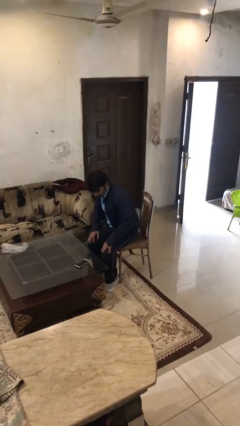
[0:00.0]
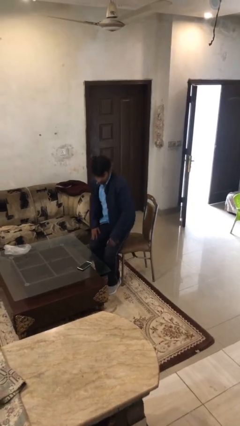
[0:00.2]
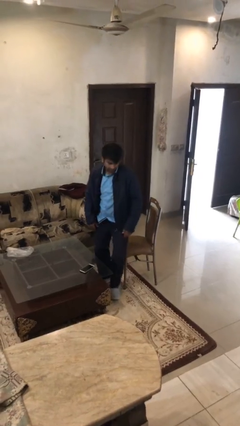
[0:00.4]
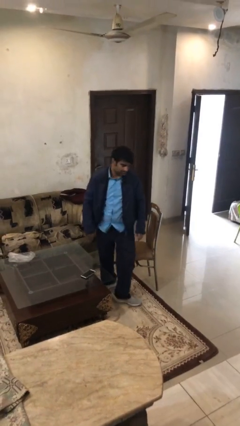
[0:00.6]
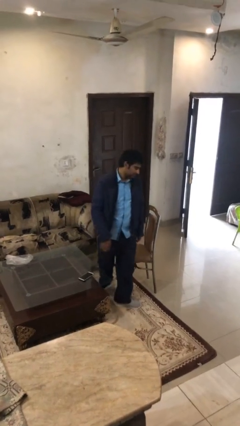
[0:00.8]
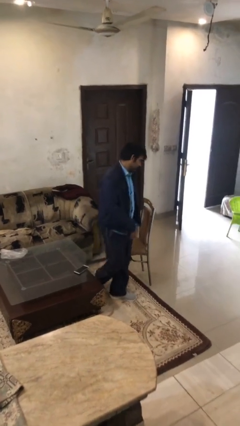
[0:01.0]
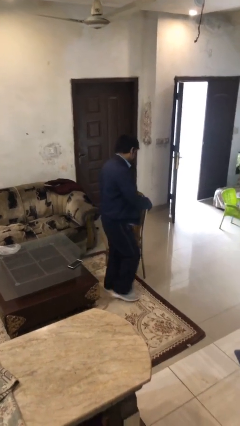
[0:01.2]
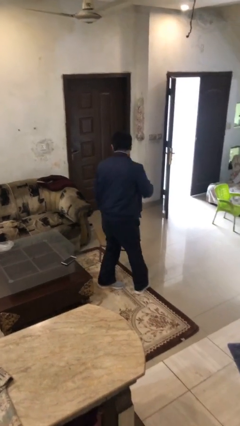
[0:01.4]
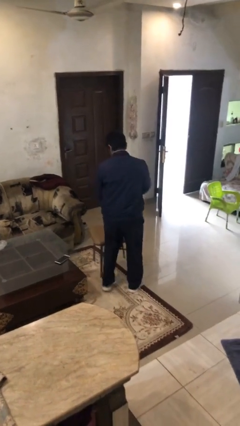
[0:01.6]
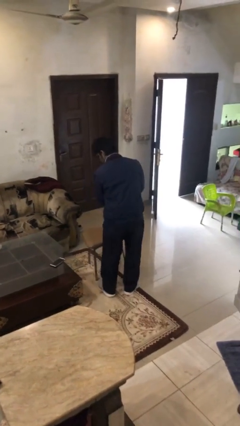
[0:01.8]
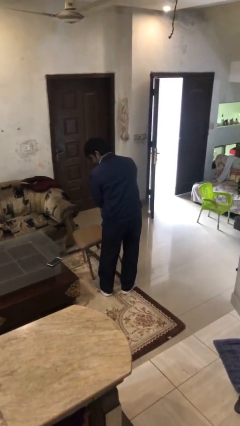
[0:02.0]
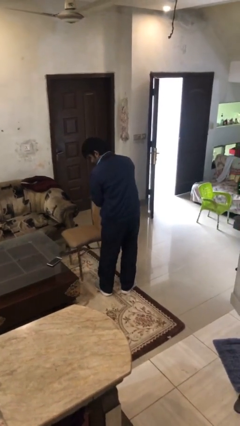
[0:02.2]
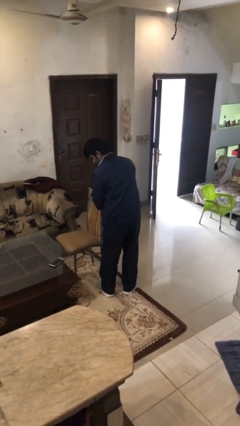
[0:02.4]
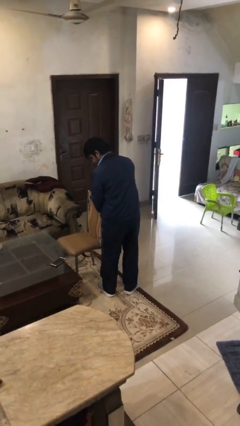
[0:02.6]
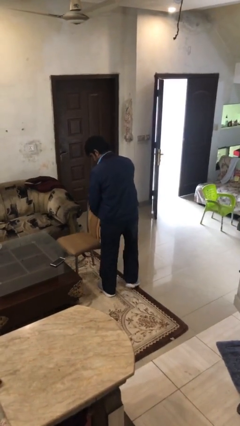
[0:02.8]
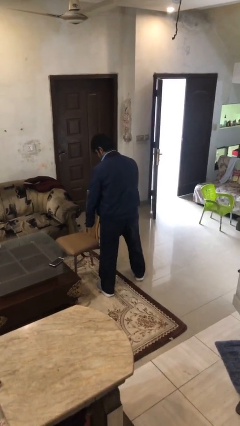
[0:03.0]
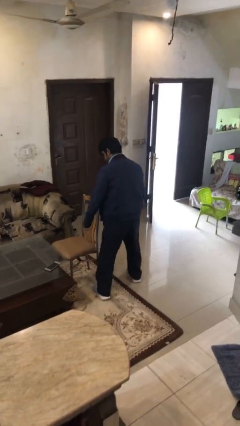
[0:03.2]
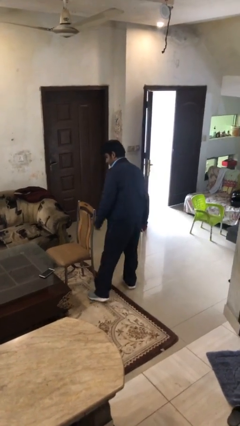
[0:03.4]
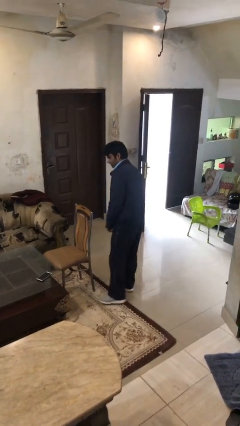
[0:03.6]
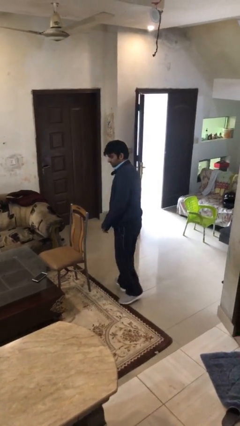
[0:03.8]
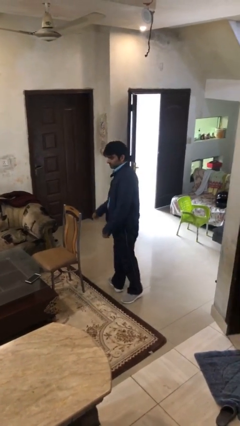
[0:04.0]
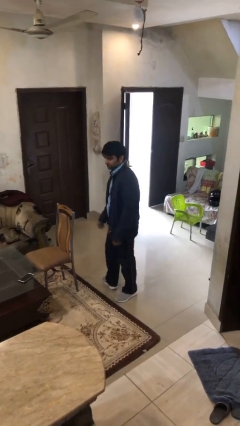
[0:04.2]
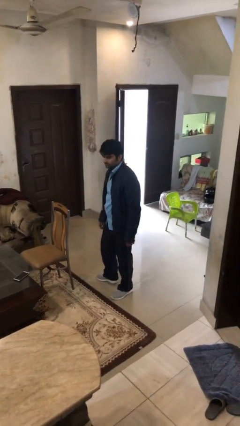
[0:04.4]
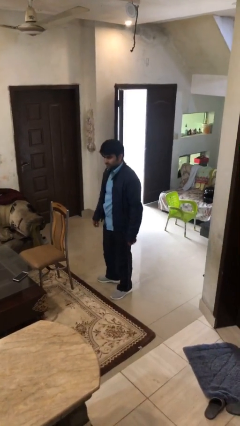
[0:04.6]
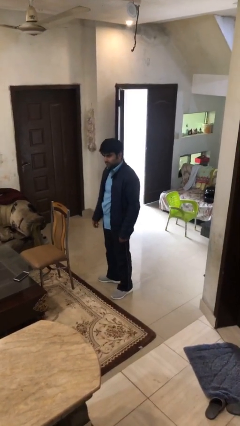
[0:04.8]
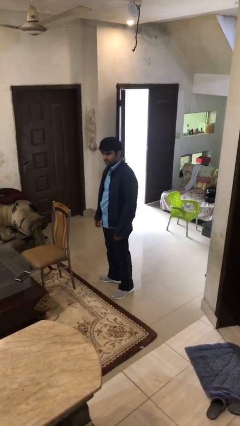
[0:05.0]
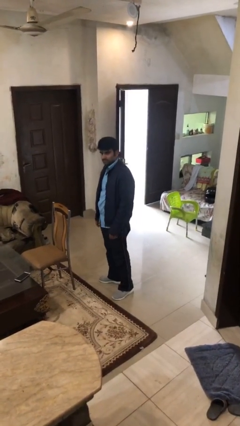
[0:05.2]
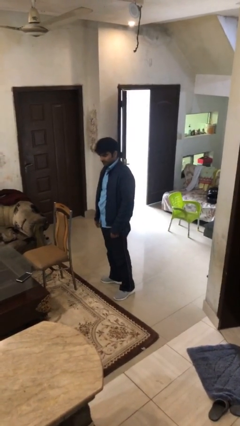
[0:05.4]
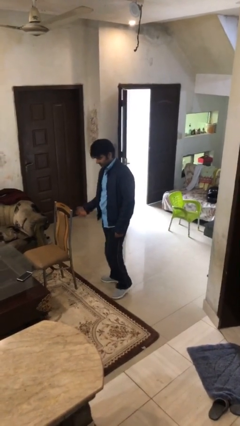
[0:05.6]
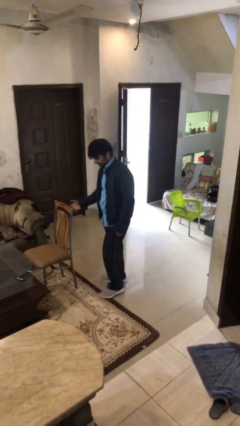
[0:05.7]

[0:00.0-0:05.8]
person stands up

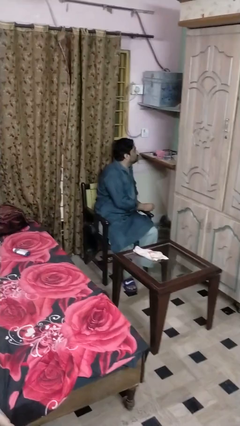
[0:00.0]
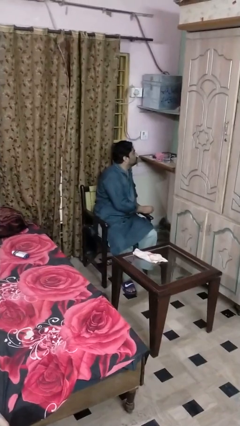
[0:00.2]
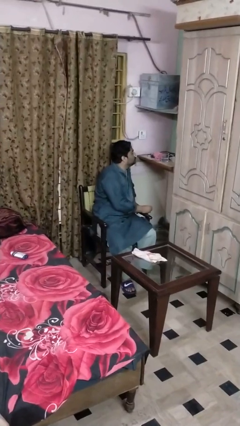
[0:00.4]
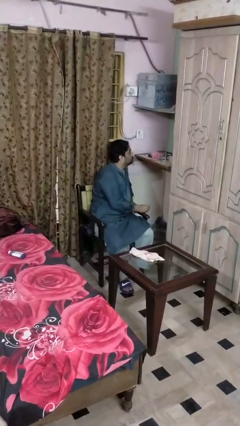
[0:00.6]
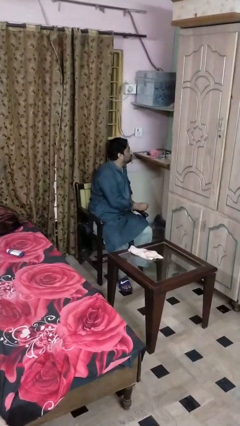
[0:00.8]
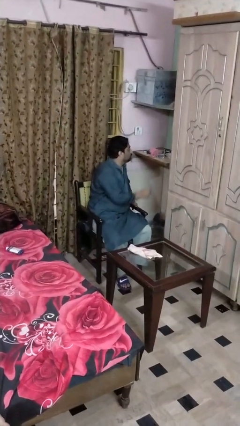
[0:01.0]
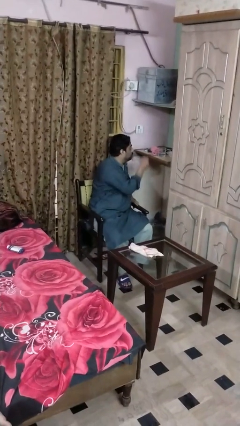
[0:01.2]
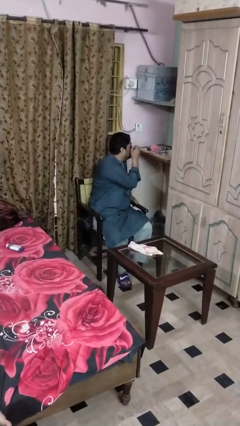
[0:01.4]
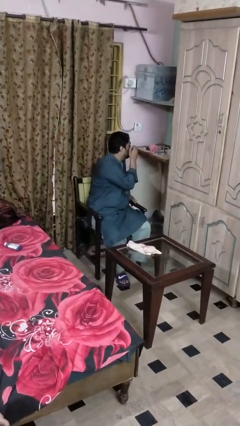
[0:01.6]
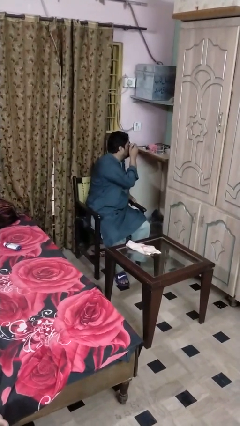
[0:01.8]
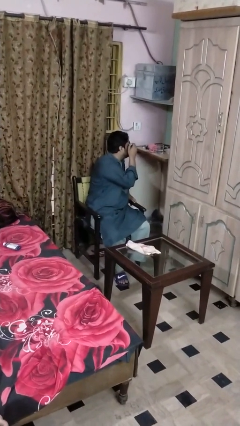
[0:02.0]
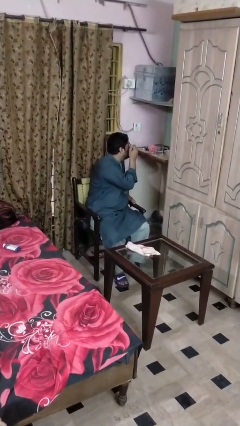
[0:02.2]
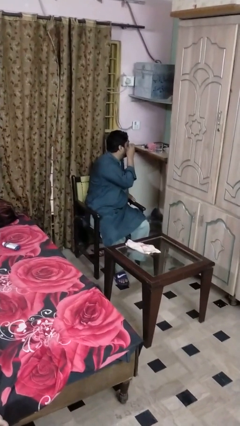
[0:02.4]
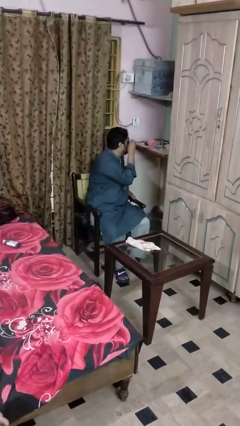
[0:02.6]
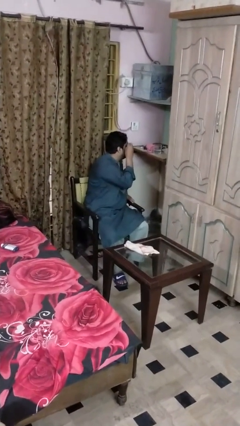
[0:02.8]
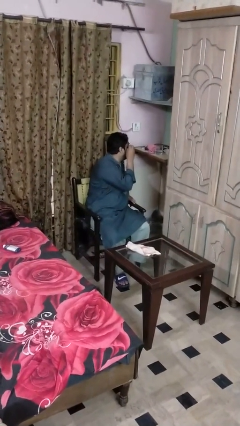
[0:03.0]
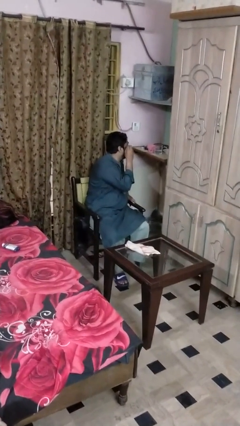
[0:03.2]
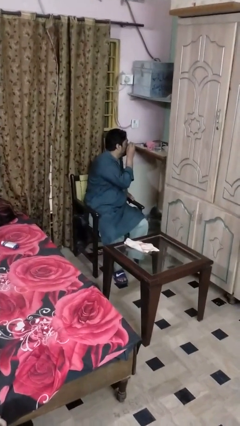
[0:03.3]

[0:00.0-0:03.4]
person applies eye makeup

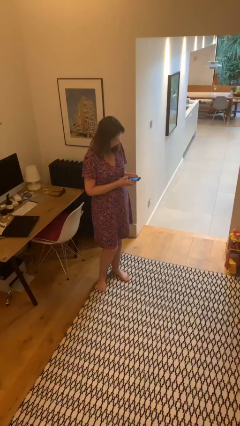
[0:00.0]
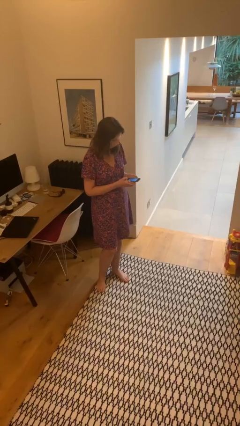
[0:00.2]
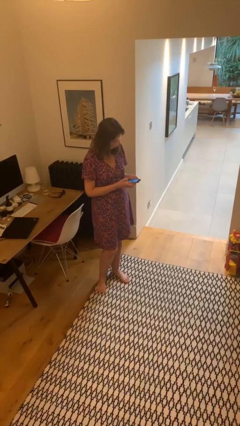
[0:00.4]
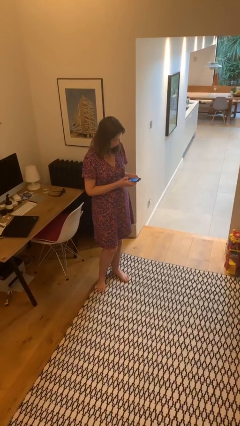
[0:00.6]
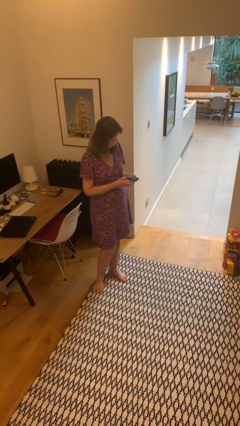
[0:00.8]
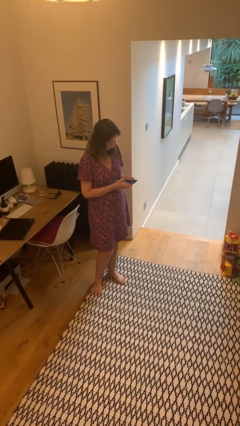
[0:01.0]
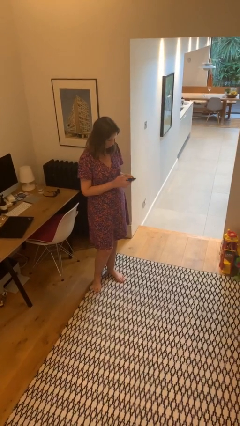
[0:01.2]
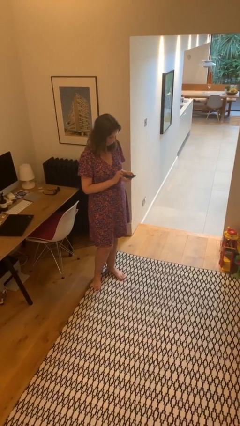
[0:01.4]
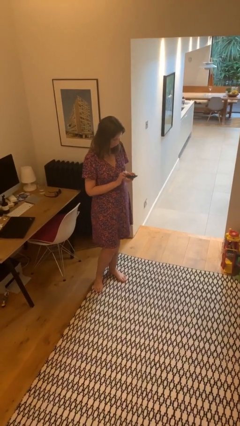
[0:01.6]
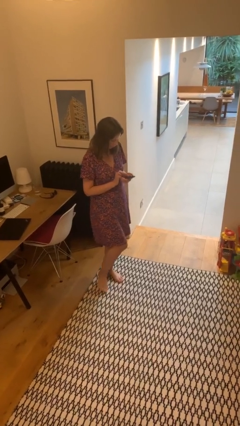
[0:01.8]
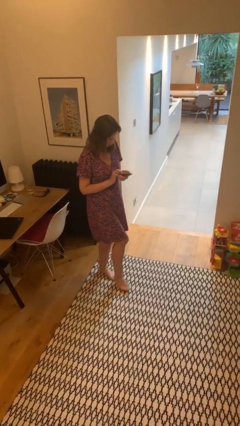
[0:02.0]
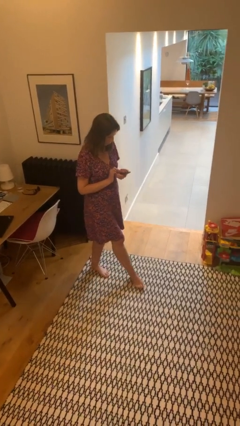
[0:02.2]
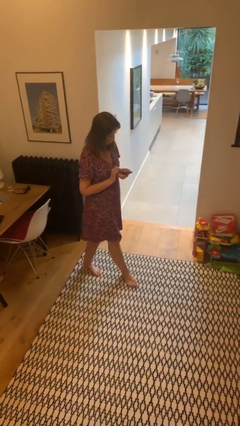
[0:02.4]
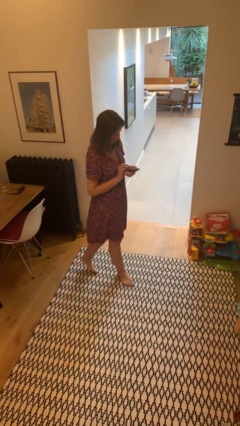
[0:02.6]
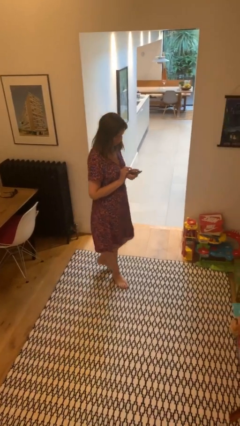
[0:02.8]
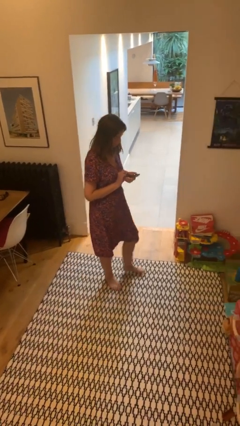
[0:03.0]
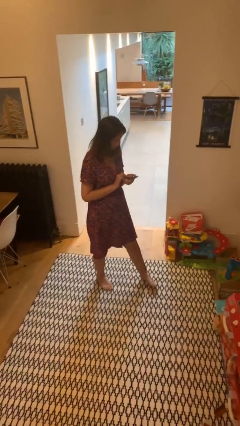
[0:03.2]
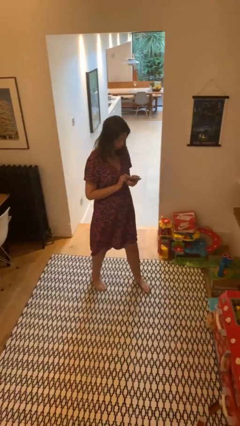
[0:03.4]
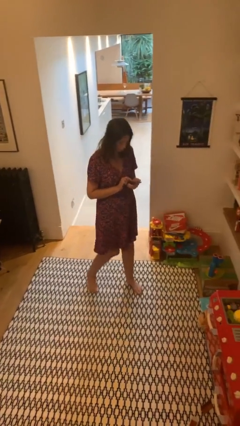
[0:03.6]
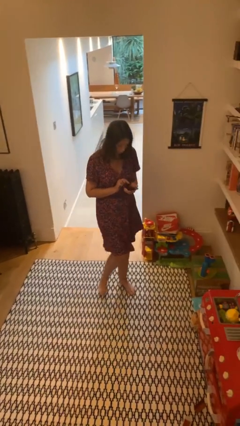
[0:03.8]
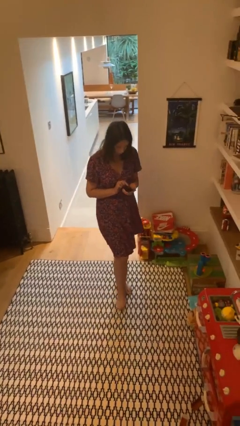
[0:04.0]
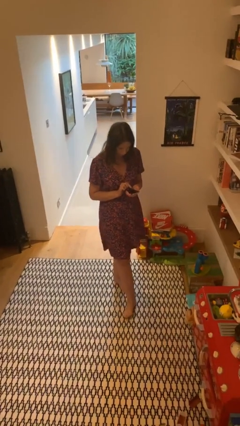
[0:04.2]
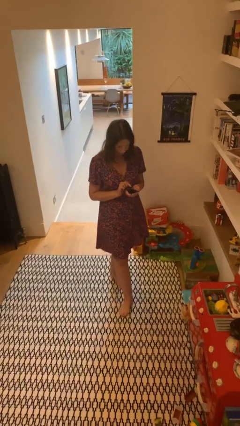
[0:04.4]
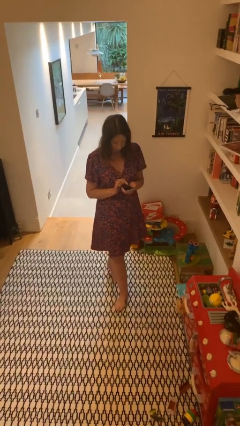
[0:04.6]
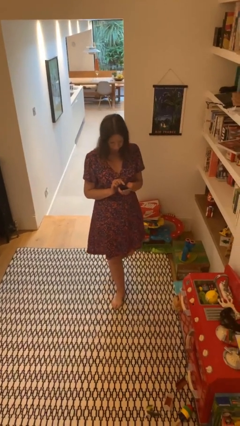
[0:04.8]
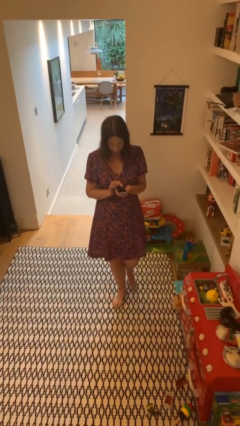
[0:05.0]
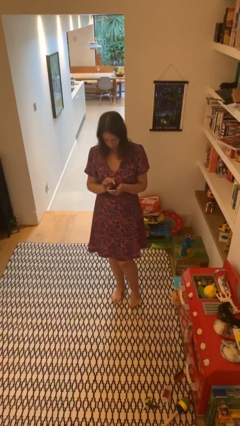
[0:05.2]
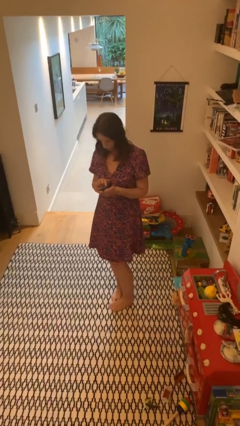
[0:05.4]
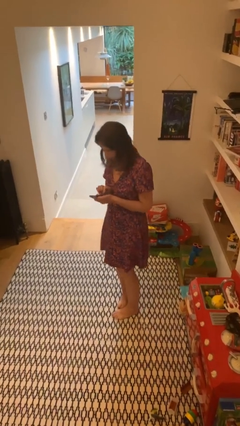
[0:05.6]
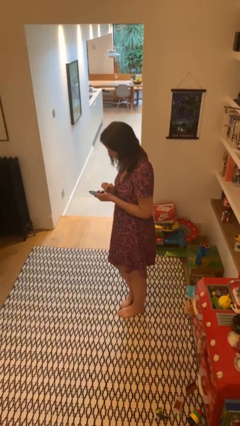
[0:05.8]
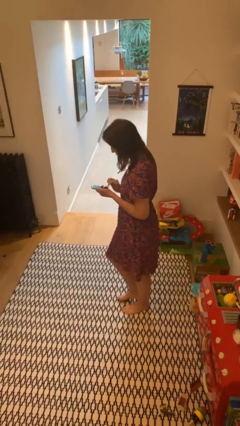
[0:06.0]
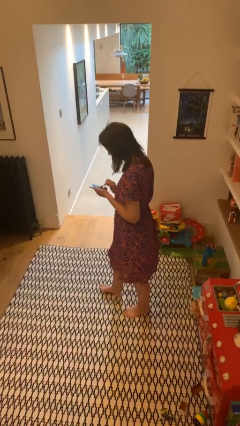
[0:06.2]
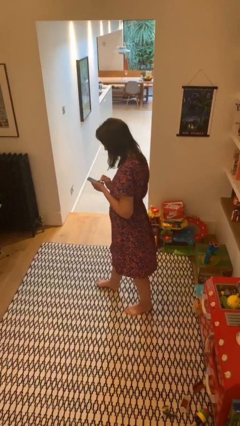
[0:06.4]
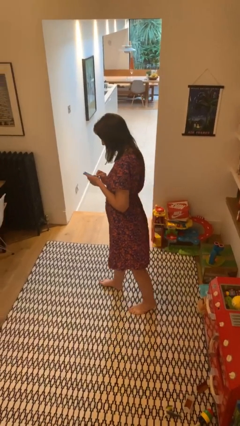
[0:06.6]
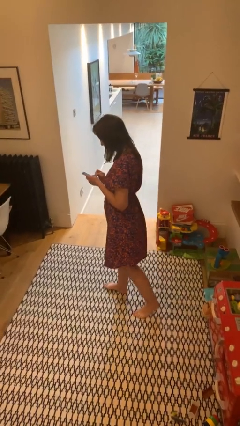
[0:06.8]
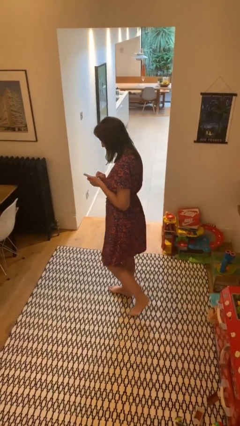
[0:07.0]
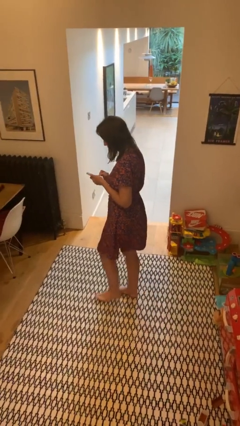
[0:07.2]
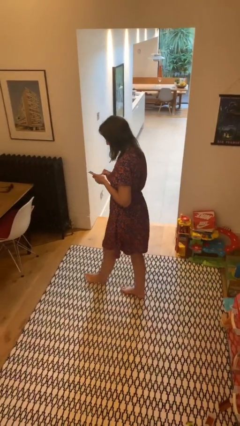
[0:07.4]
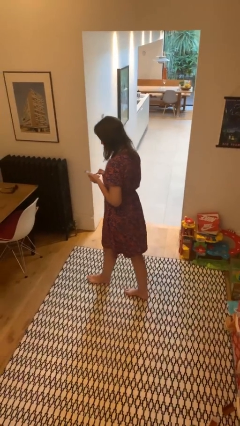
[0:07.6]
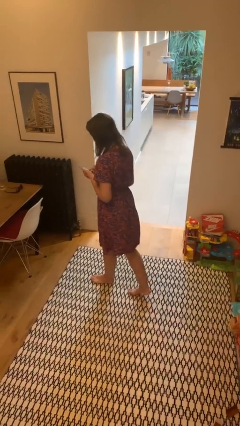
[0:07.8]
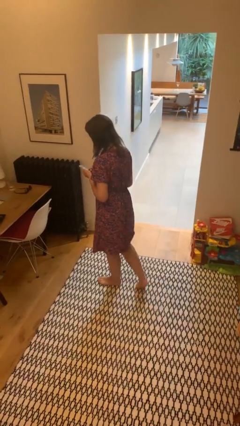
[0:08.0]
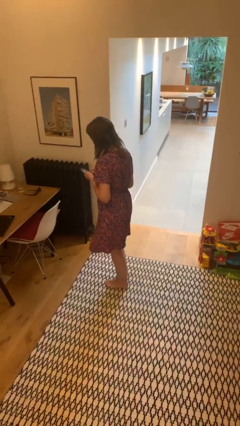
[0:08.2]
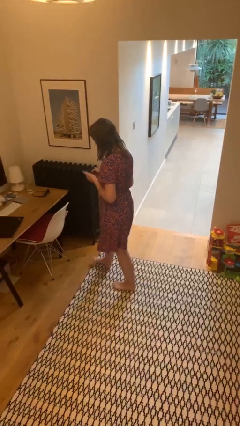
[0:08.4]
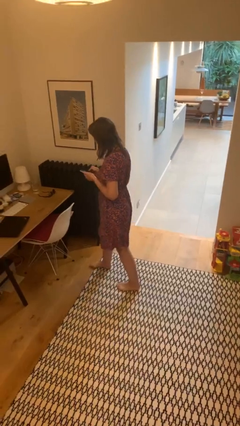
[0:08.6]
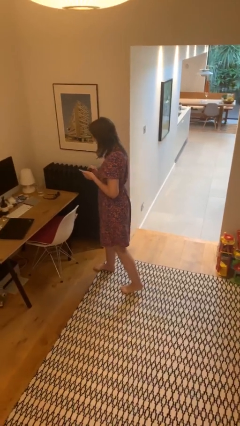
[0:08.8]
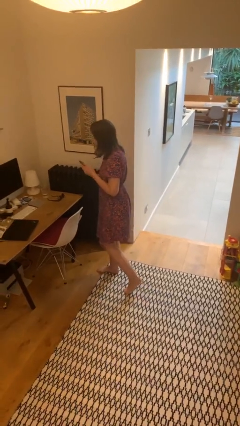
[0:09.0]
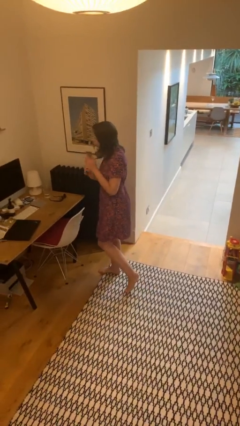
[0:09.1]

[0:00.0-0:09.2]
person texts on phone
